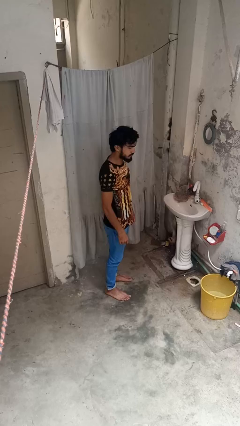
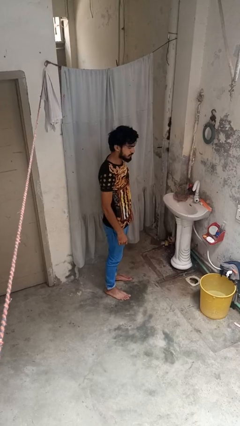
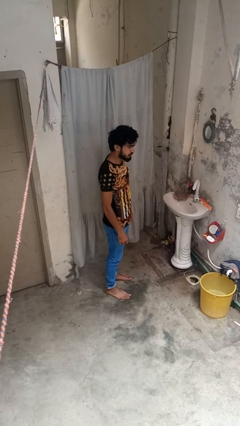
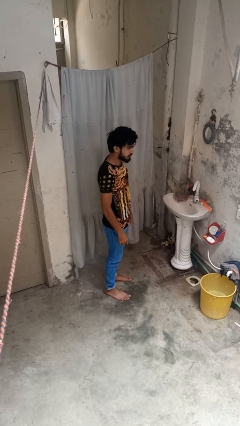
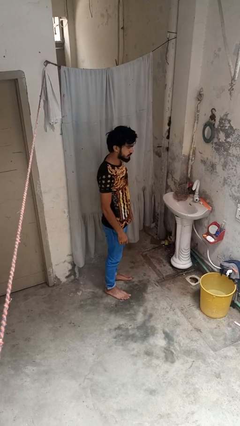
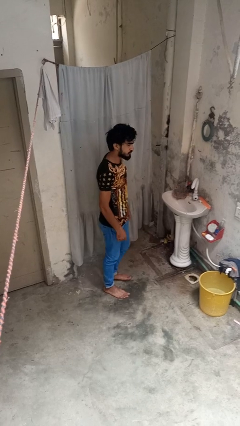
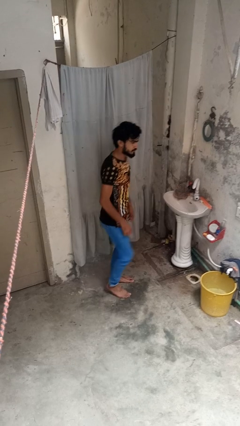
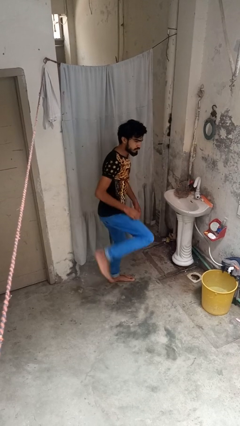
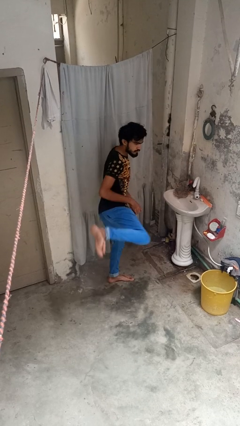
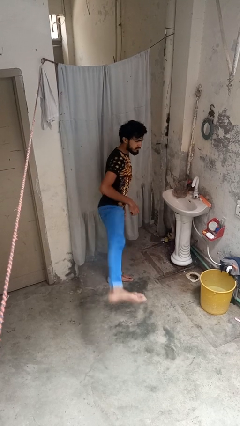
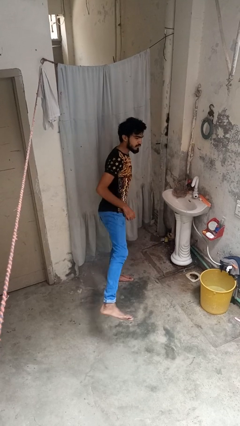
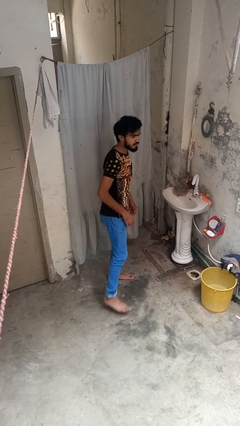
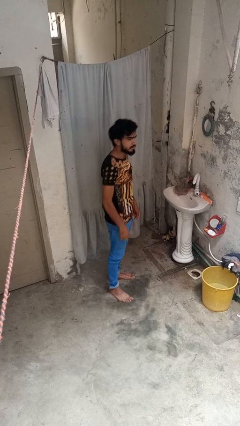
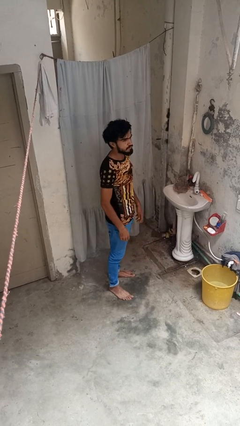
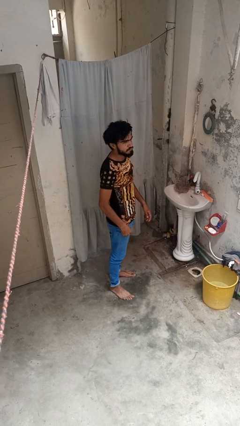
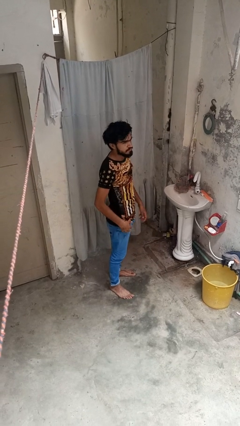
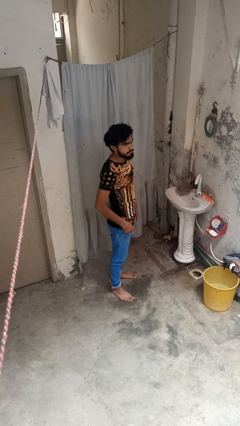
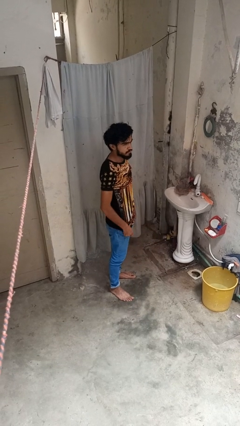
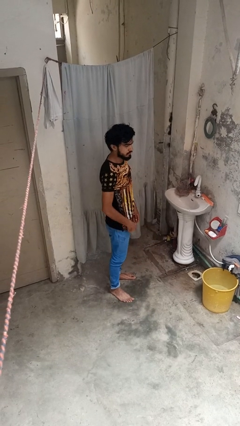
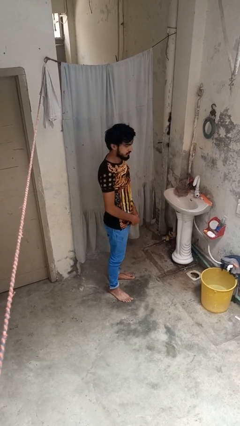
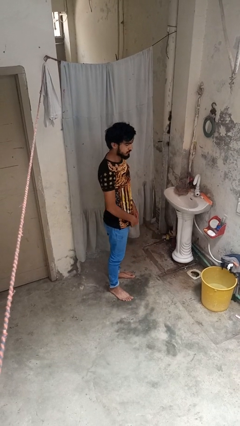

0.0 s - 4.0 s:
person karate kicks

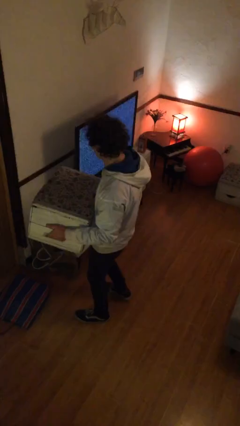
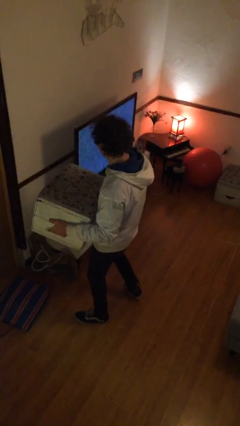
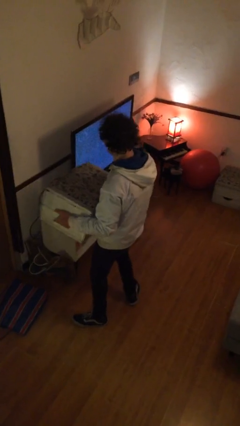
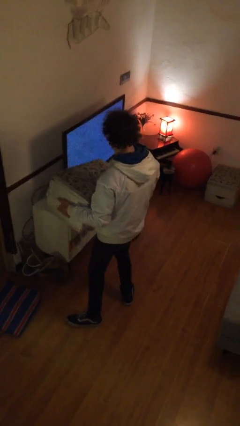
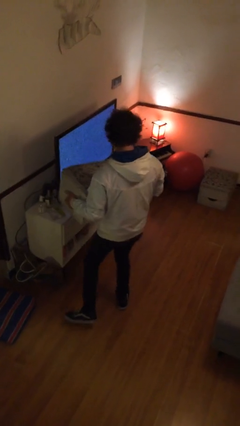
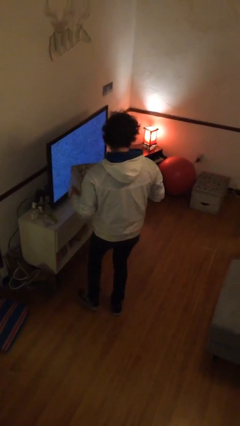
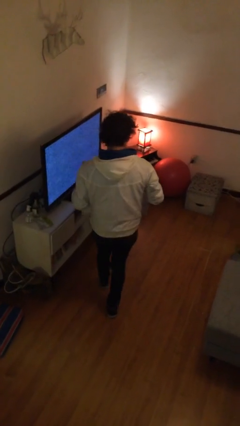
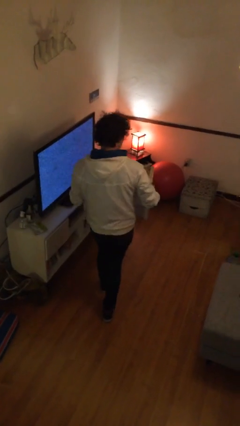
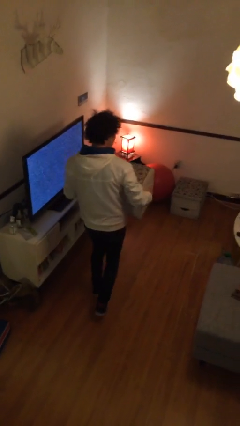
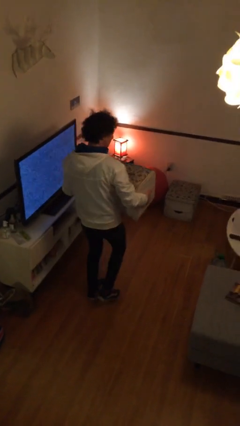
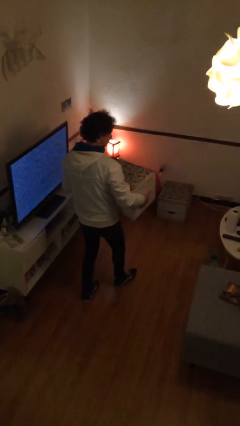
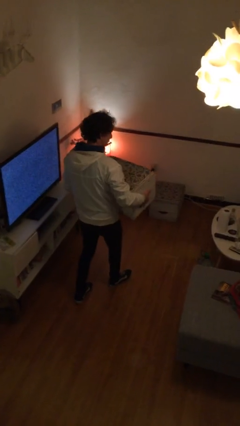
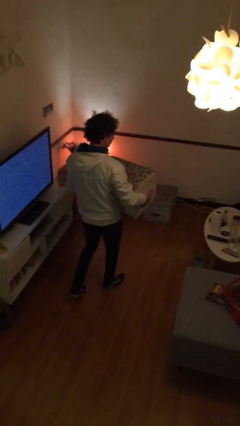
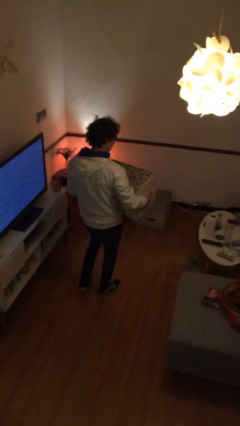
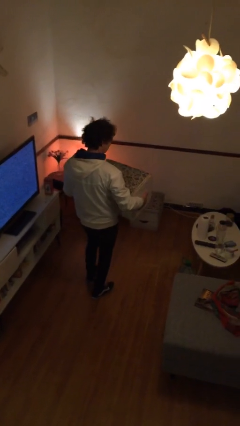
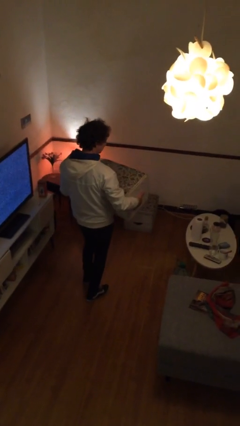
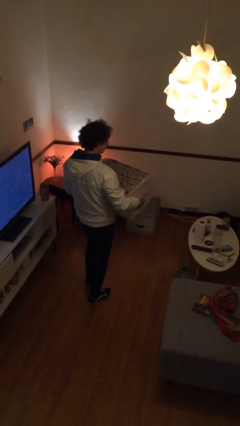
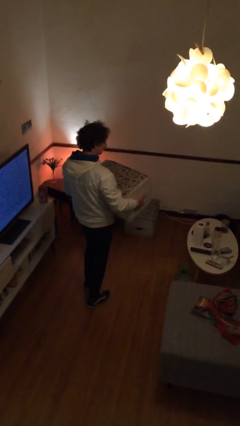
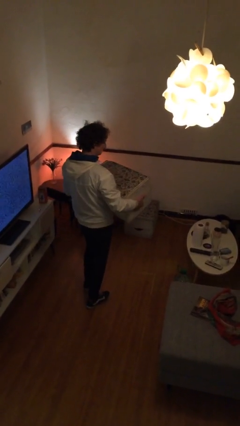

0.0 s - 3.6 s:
person carries furniture

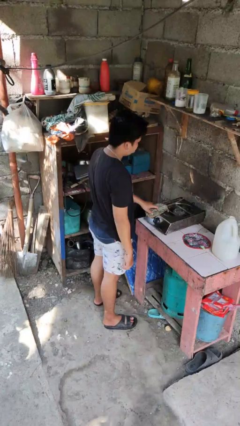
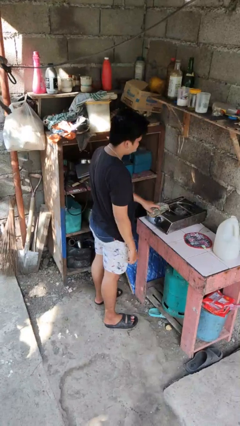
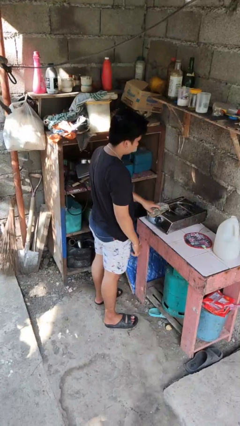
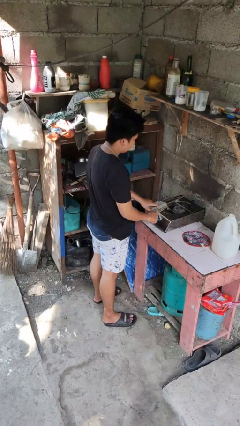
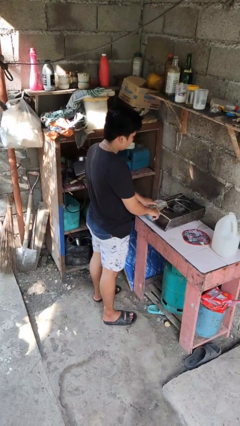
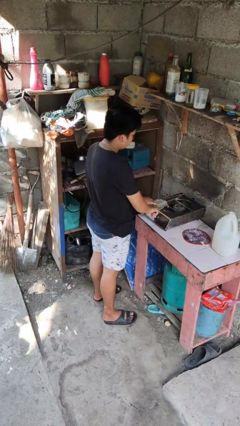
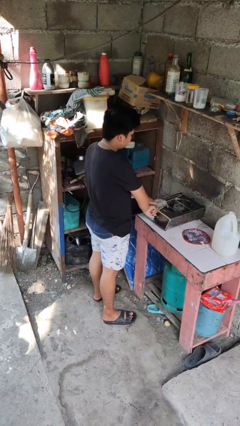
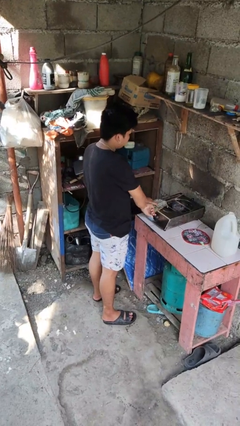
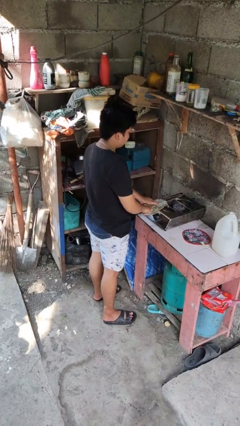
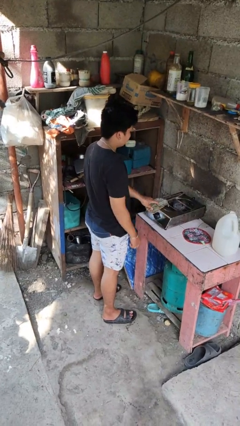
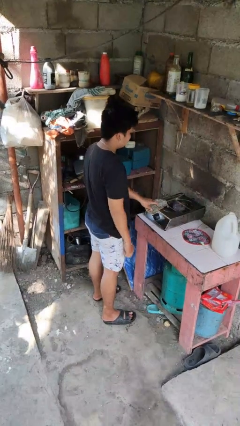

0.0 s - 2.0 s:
person turns on stovetop

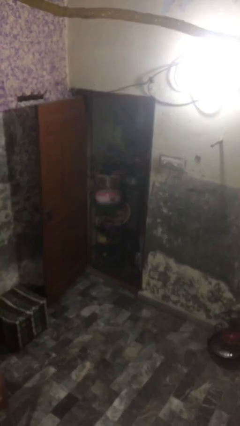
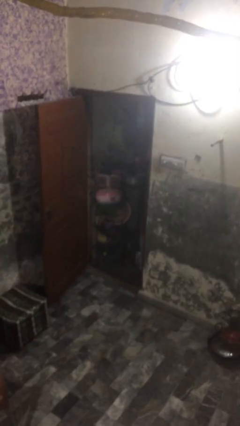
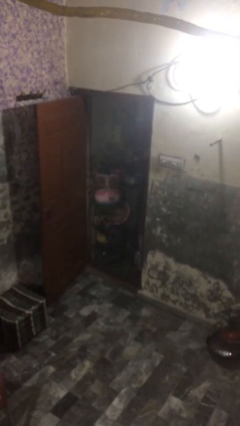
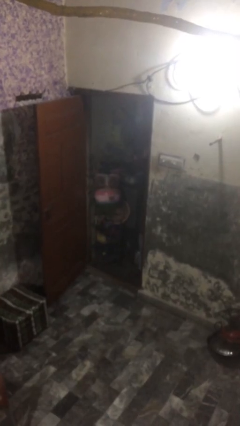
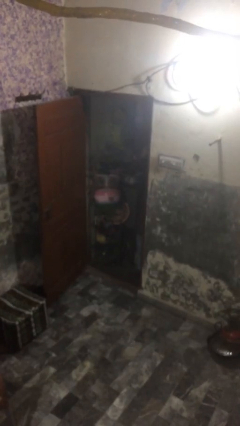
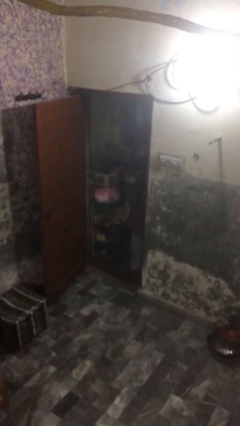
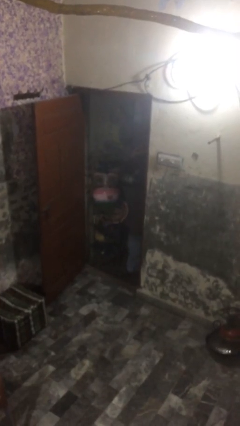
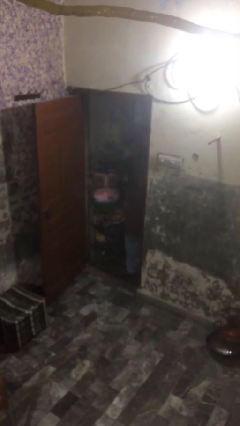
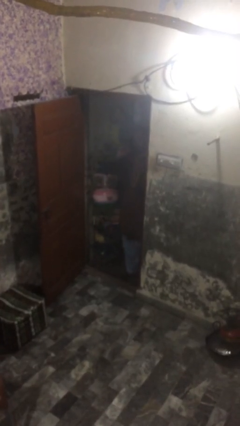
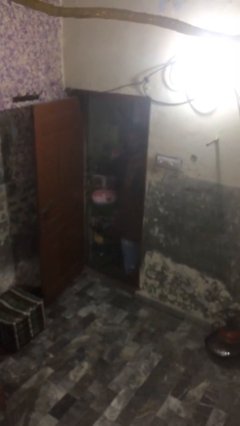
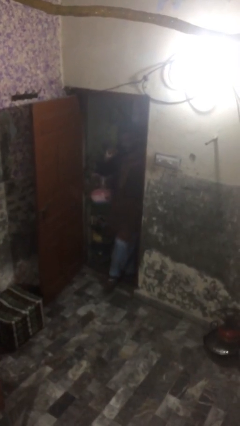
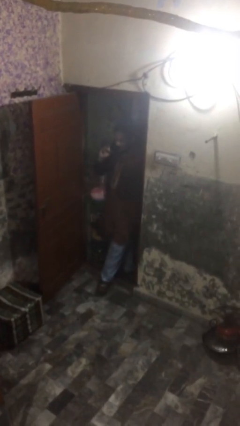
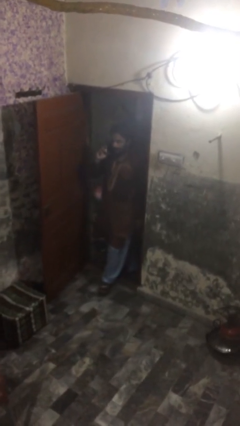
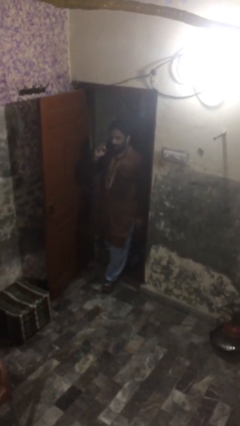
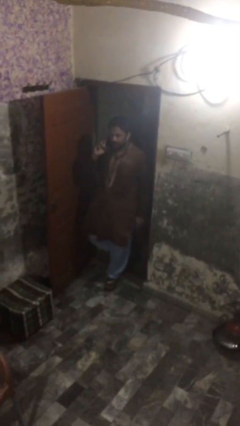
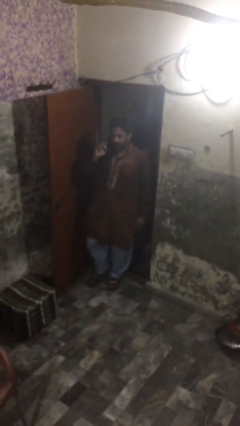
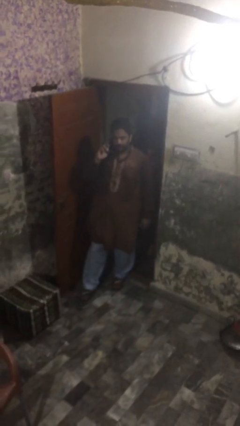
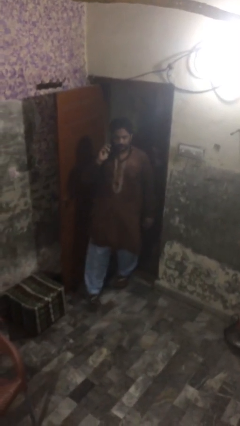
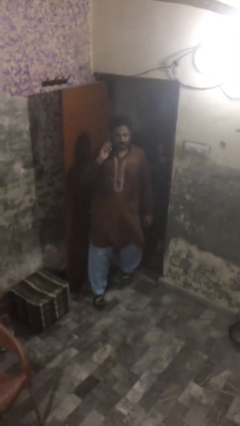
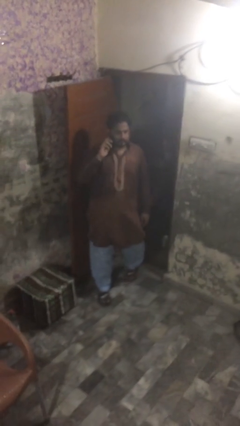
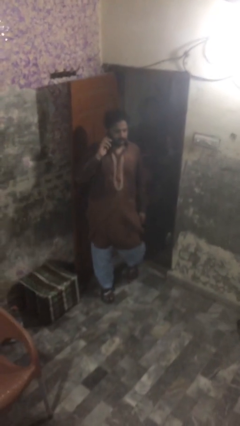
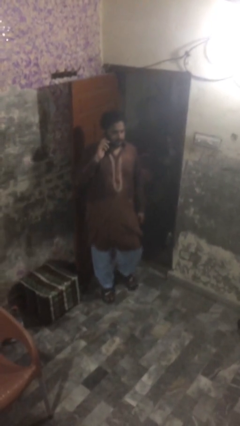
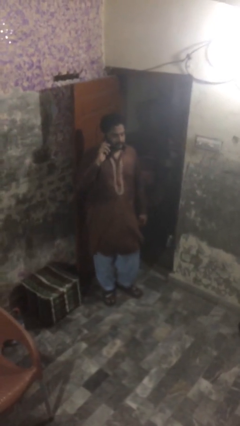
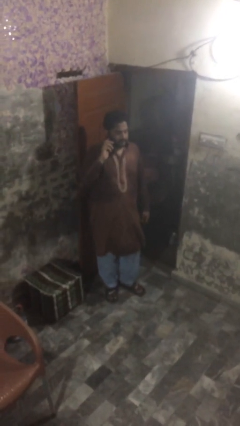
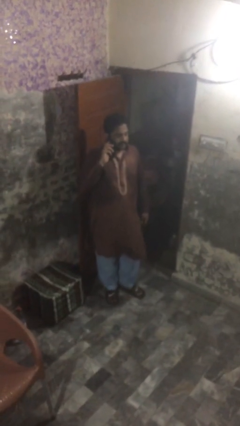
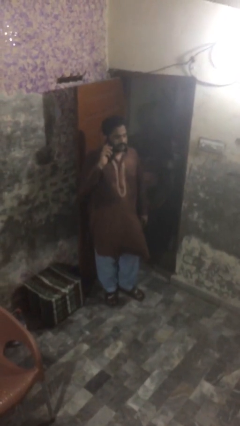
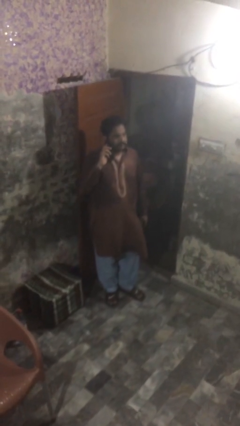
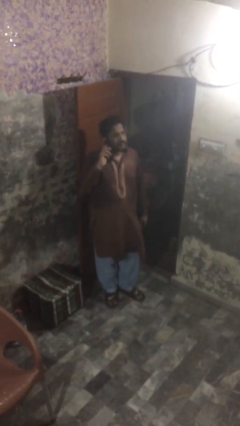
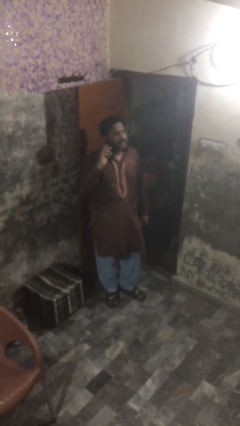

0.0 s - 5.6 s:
person enters scene through structure

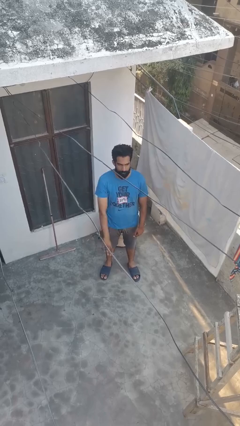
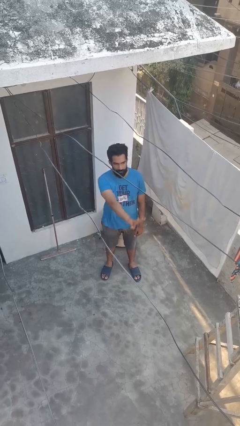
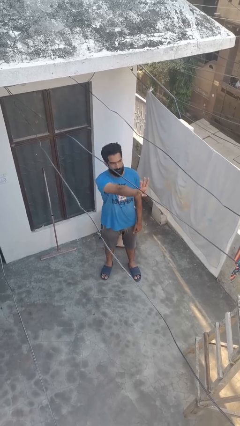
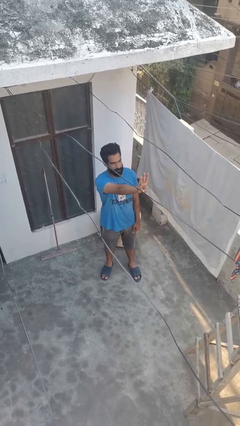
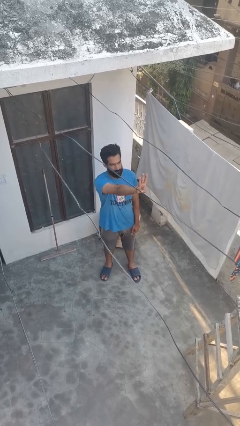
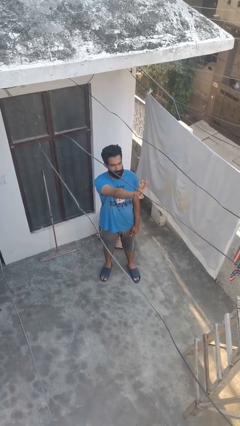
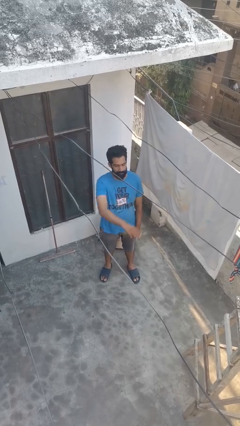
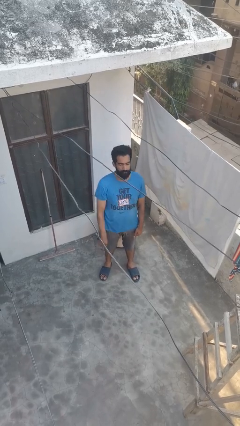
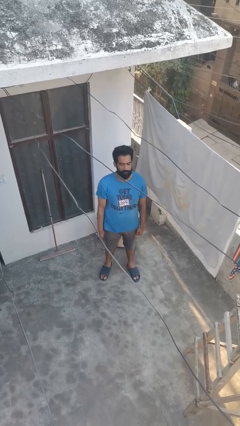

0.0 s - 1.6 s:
person gestures number three

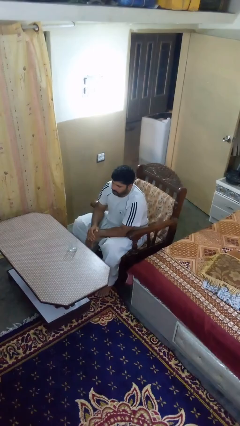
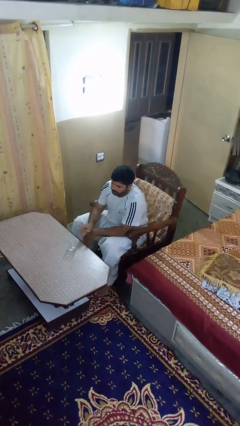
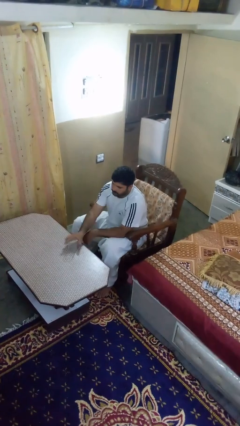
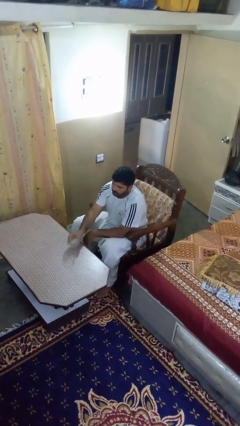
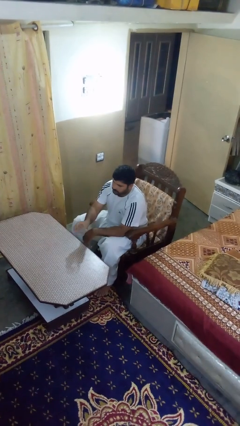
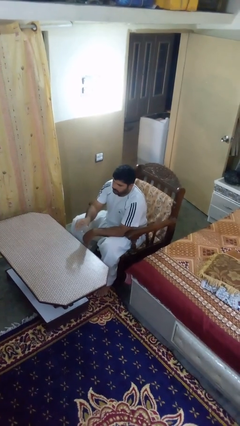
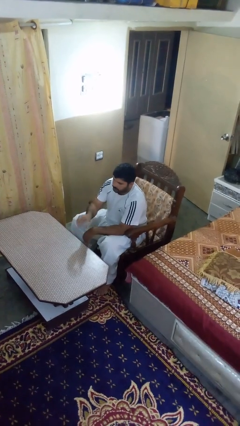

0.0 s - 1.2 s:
person picks up object from table
